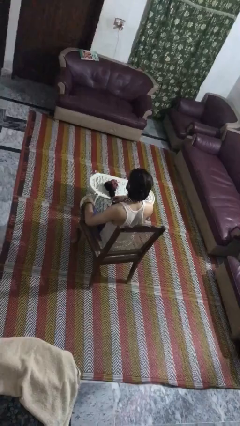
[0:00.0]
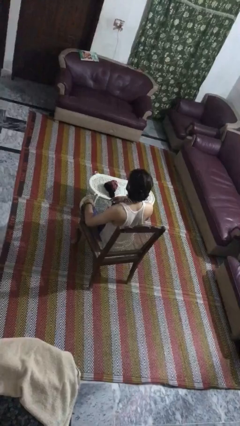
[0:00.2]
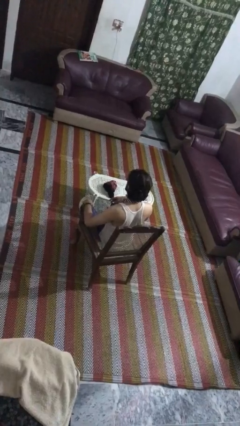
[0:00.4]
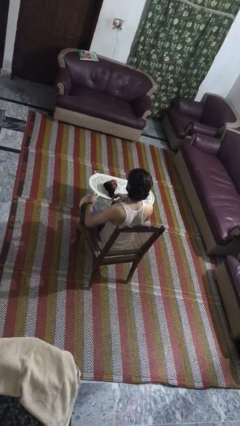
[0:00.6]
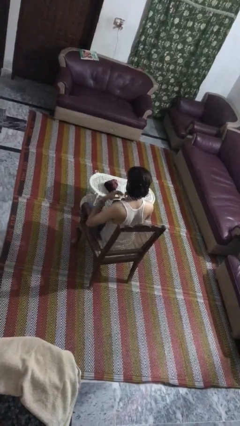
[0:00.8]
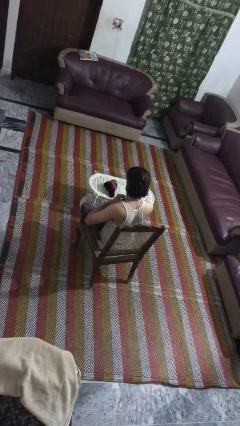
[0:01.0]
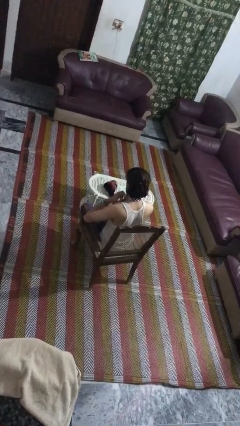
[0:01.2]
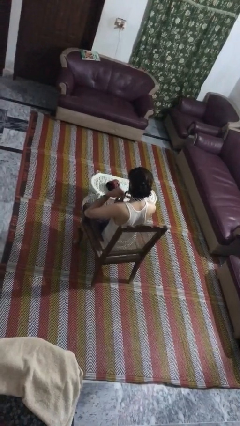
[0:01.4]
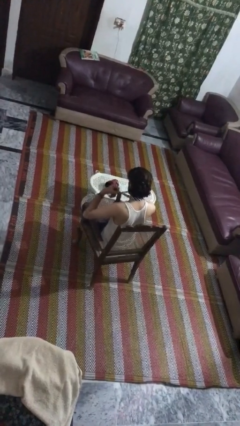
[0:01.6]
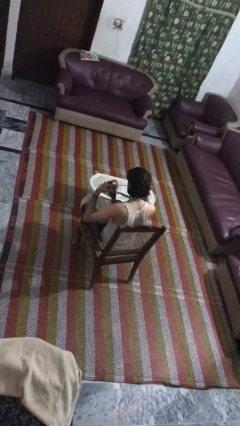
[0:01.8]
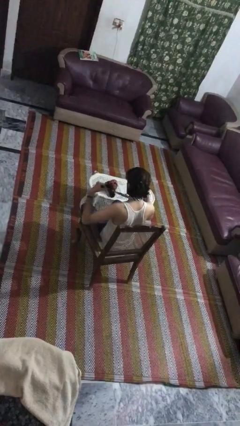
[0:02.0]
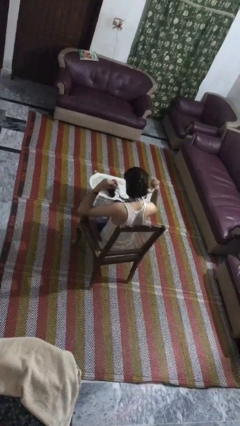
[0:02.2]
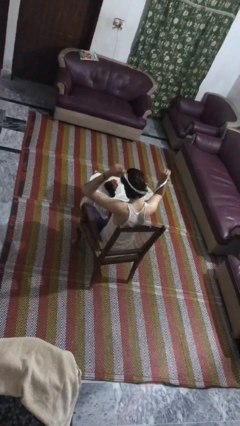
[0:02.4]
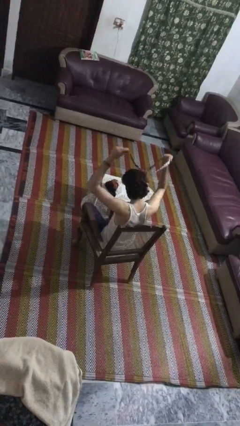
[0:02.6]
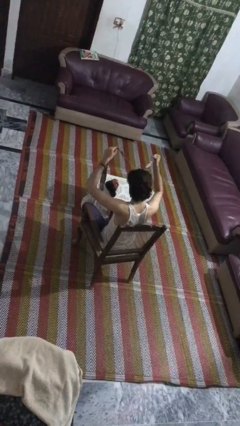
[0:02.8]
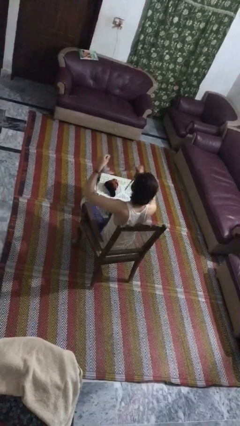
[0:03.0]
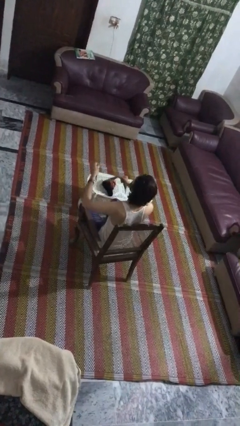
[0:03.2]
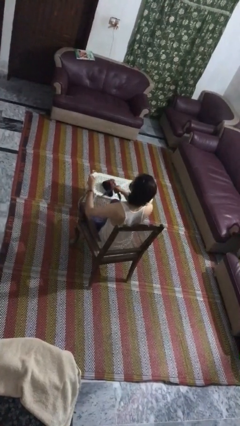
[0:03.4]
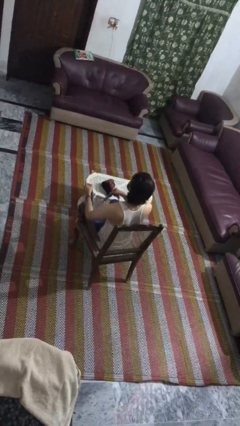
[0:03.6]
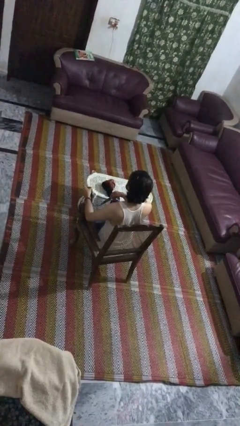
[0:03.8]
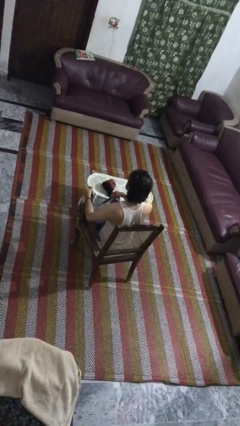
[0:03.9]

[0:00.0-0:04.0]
person takes off necktie

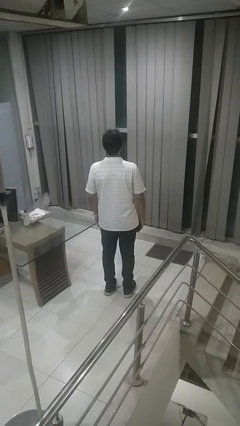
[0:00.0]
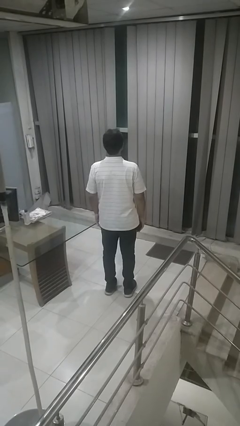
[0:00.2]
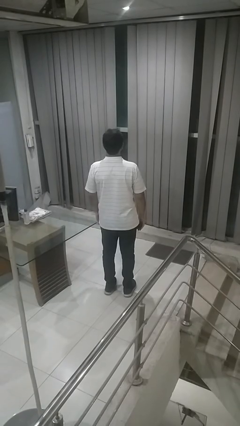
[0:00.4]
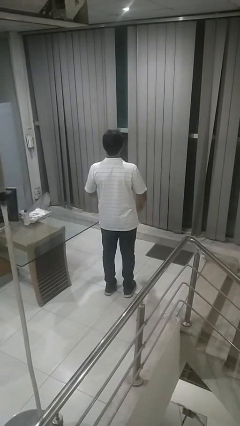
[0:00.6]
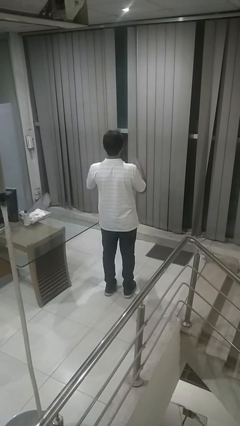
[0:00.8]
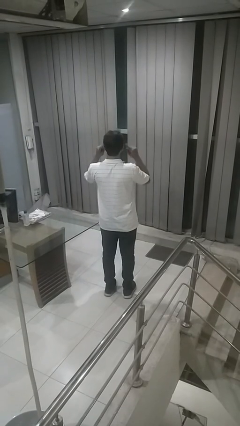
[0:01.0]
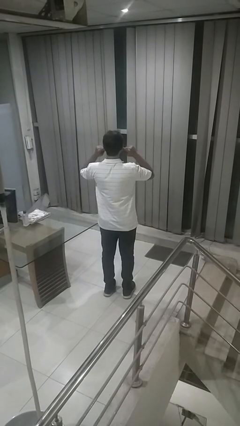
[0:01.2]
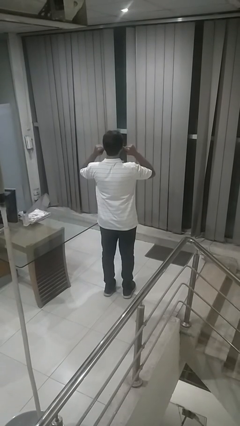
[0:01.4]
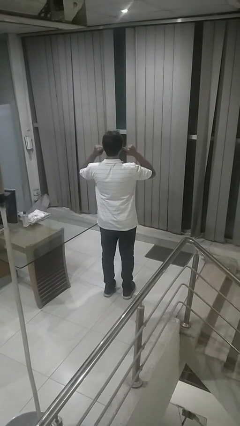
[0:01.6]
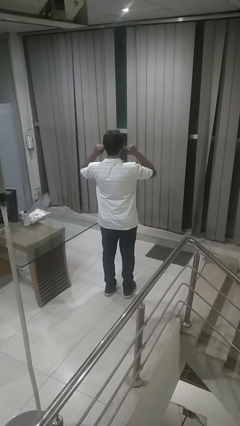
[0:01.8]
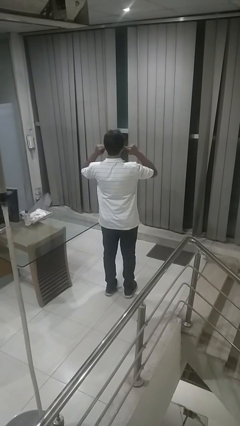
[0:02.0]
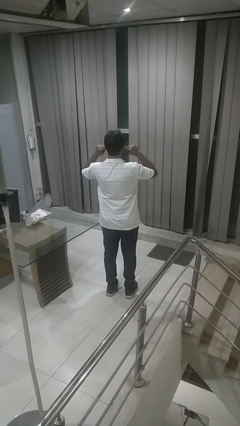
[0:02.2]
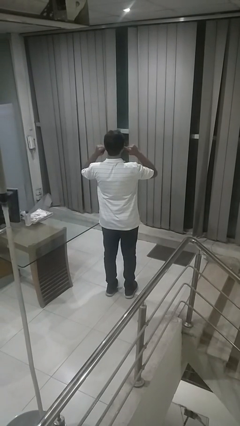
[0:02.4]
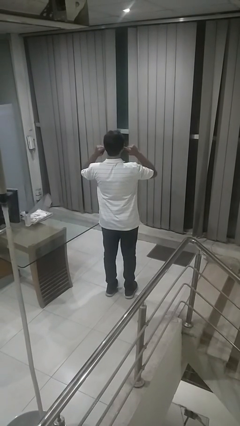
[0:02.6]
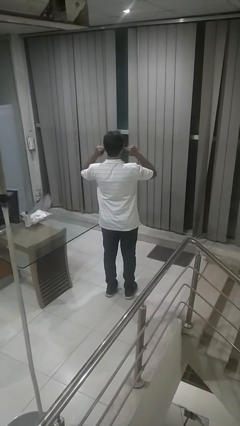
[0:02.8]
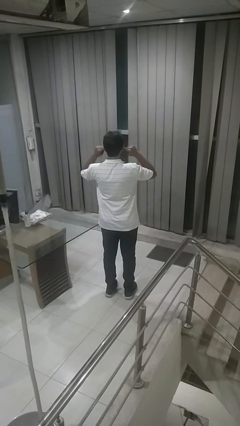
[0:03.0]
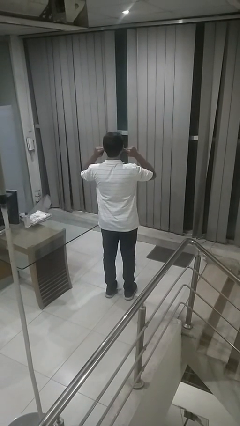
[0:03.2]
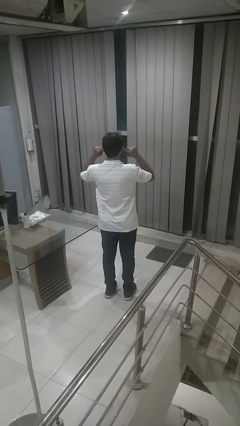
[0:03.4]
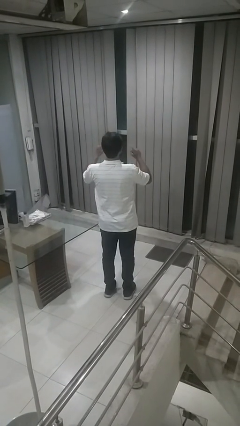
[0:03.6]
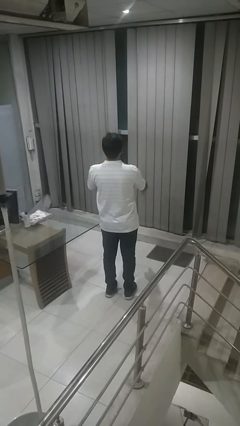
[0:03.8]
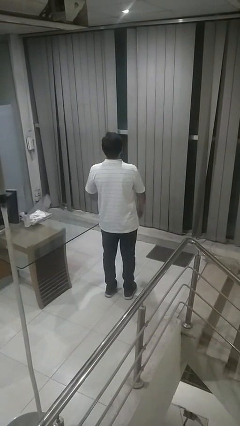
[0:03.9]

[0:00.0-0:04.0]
person puts fingers in ear

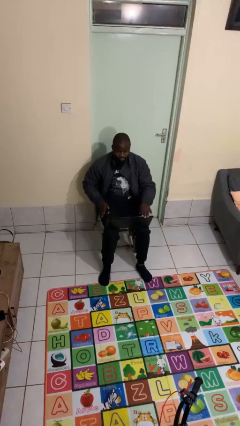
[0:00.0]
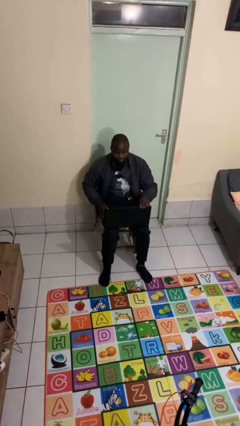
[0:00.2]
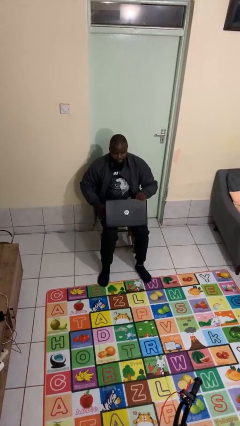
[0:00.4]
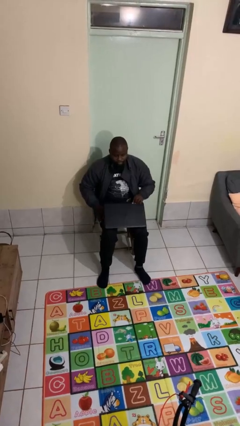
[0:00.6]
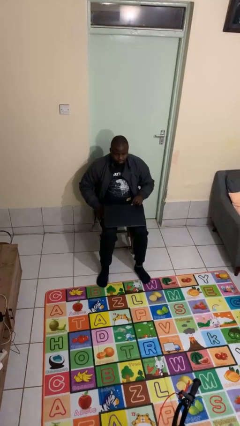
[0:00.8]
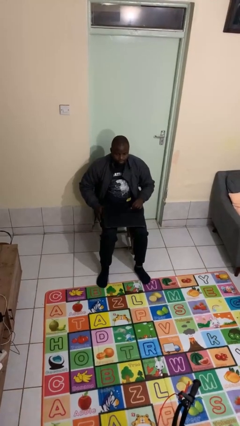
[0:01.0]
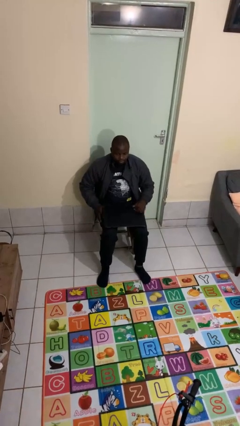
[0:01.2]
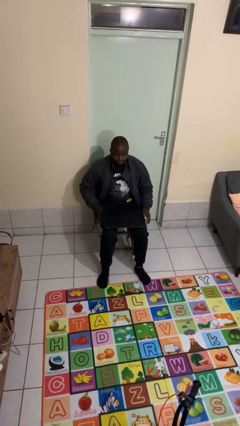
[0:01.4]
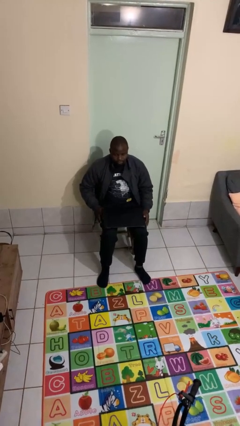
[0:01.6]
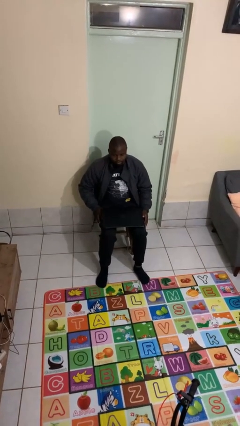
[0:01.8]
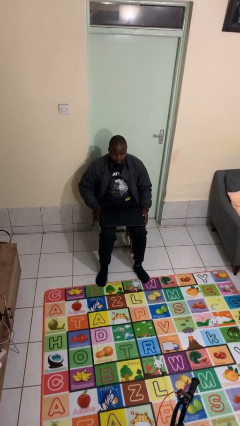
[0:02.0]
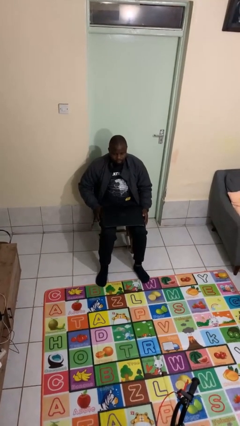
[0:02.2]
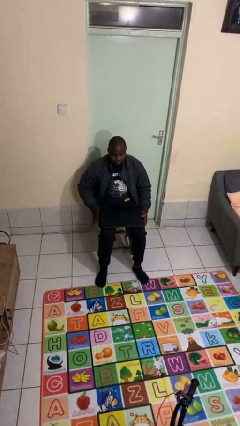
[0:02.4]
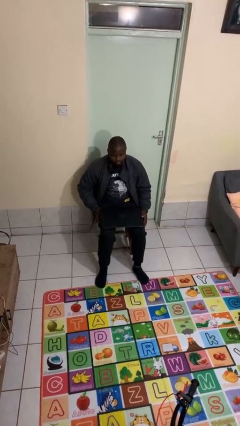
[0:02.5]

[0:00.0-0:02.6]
person closes laptop

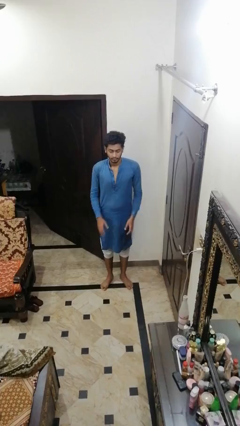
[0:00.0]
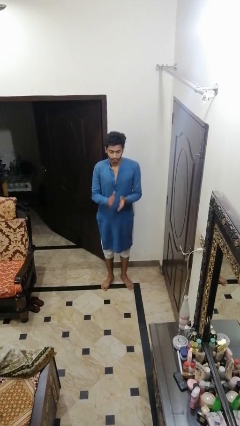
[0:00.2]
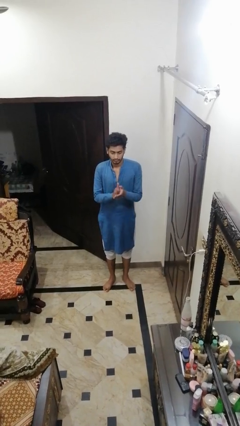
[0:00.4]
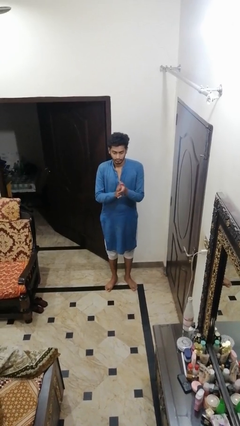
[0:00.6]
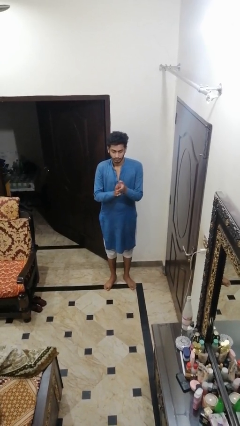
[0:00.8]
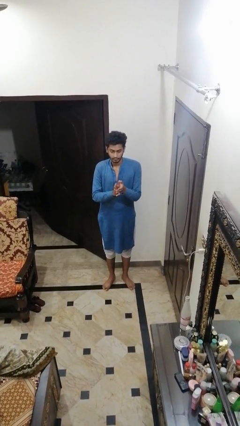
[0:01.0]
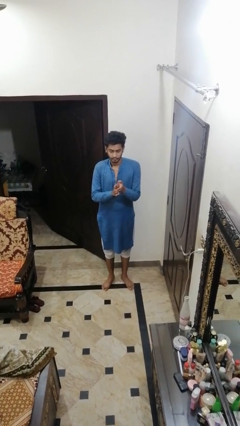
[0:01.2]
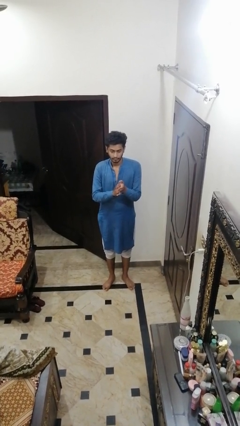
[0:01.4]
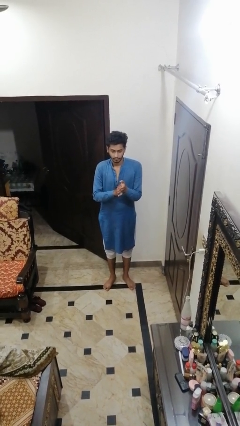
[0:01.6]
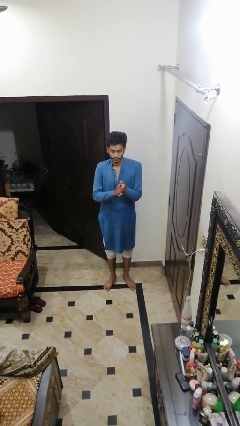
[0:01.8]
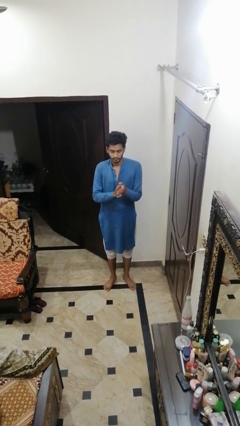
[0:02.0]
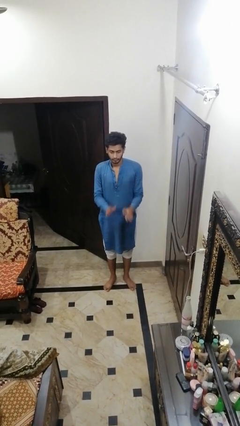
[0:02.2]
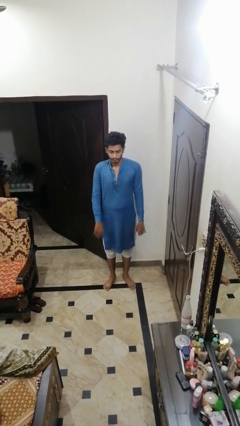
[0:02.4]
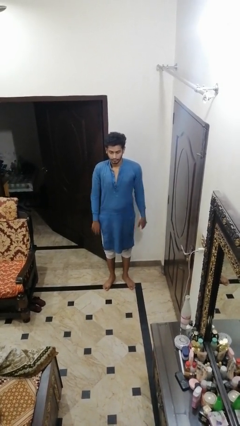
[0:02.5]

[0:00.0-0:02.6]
person claps hands

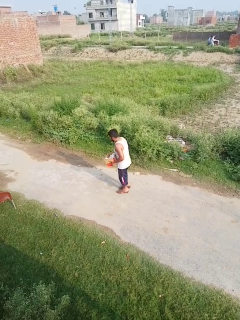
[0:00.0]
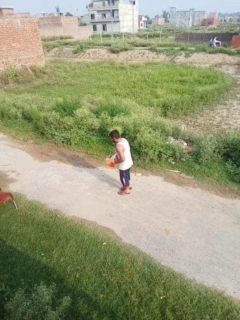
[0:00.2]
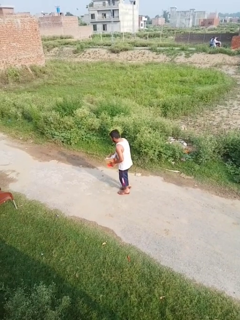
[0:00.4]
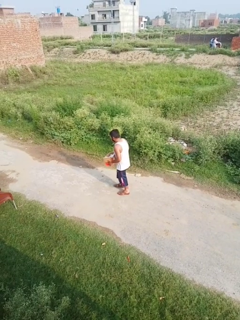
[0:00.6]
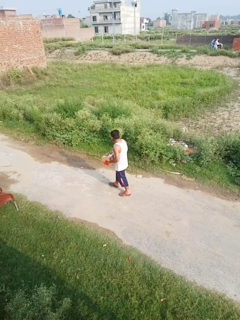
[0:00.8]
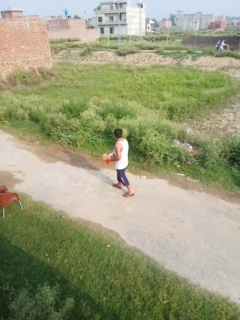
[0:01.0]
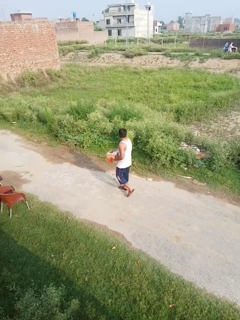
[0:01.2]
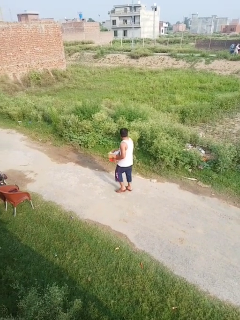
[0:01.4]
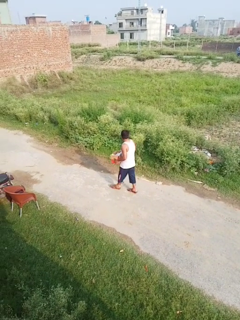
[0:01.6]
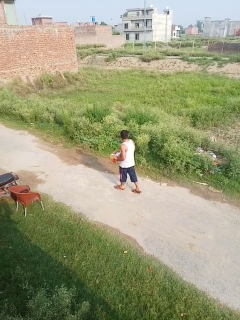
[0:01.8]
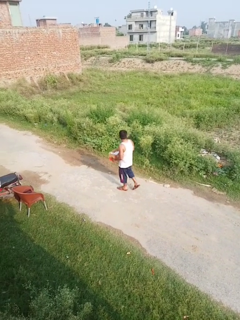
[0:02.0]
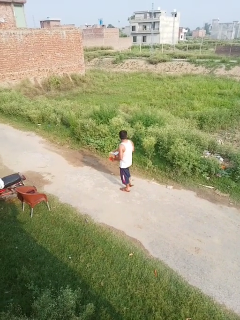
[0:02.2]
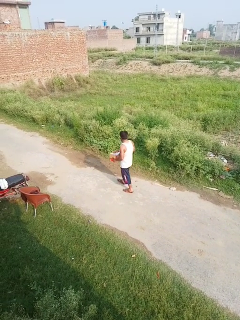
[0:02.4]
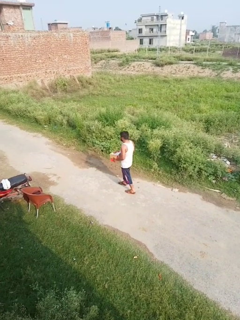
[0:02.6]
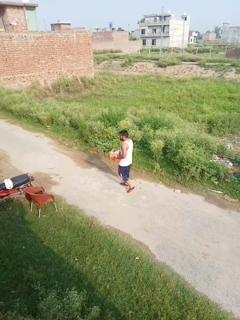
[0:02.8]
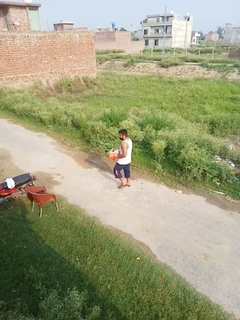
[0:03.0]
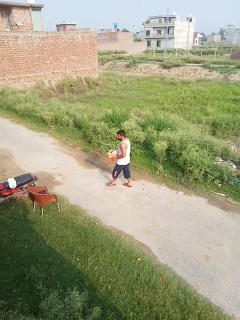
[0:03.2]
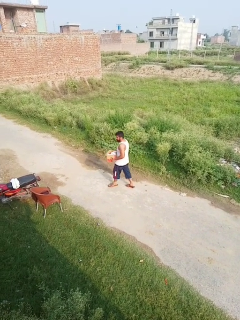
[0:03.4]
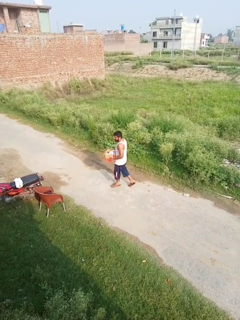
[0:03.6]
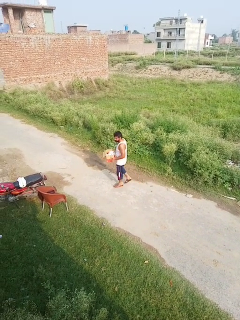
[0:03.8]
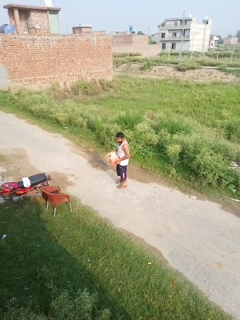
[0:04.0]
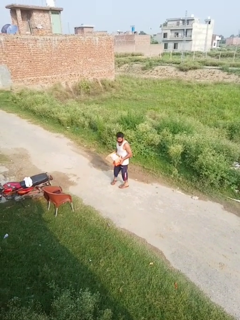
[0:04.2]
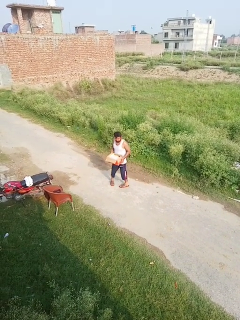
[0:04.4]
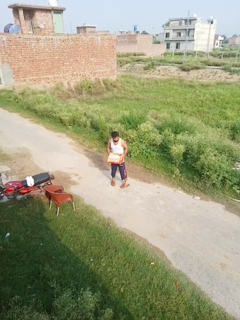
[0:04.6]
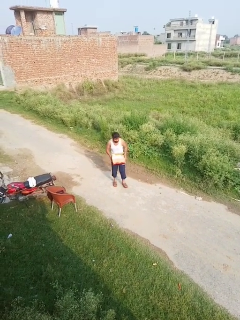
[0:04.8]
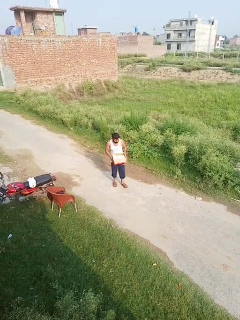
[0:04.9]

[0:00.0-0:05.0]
person carries laundry basket

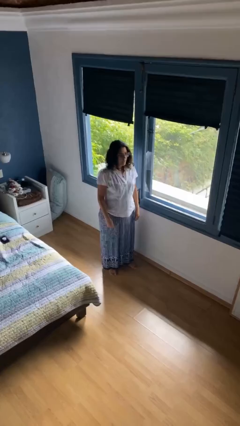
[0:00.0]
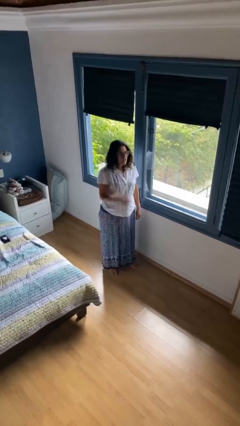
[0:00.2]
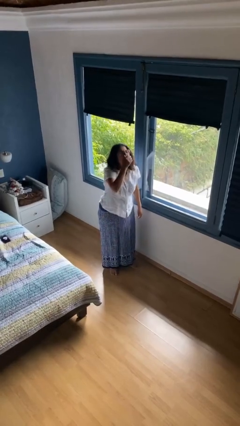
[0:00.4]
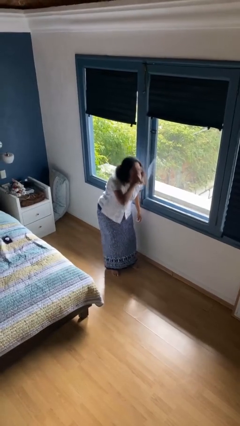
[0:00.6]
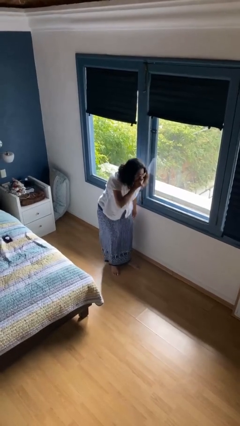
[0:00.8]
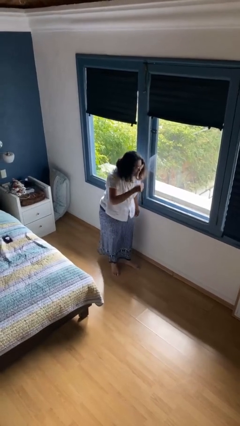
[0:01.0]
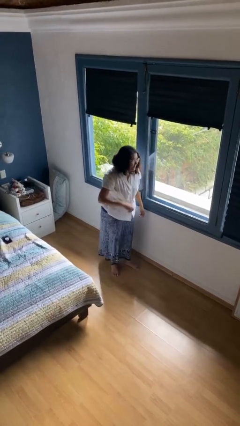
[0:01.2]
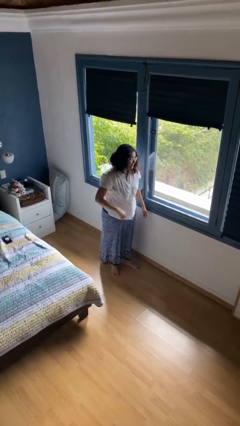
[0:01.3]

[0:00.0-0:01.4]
person sneezes into hand
